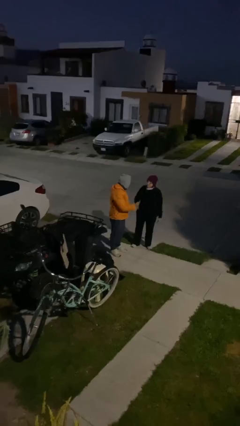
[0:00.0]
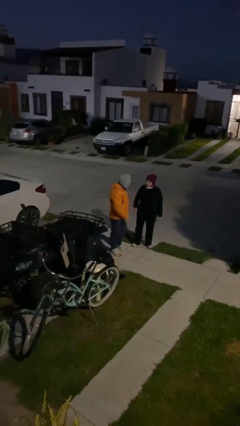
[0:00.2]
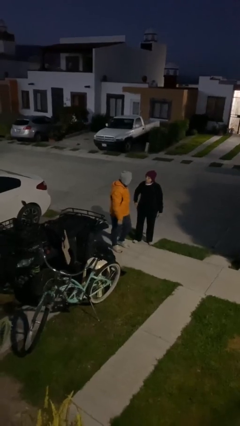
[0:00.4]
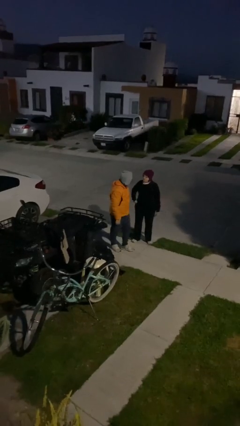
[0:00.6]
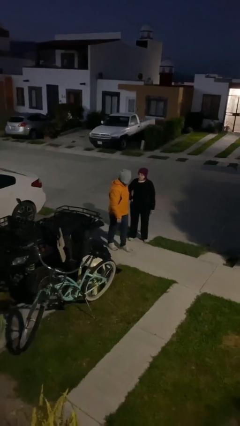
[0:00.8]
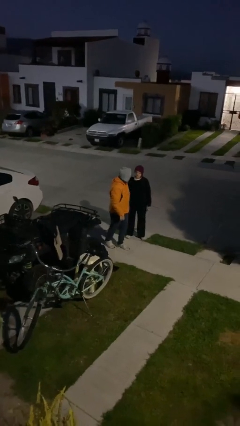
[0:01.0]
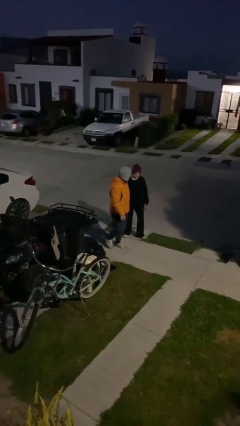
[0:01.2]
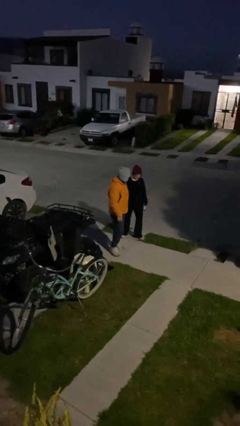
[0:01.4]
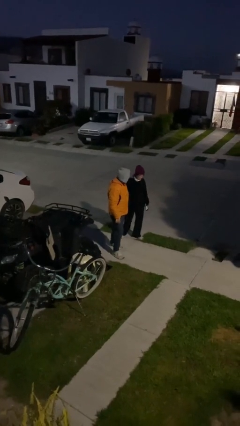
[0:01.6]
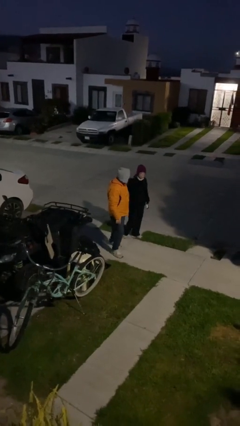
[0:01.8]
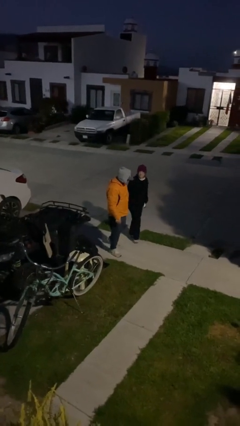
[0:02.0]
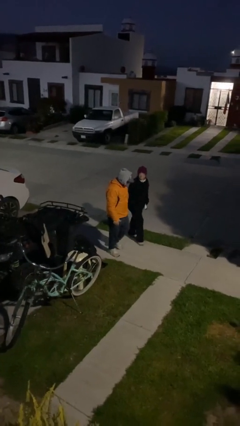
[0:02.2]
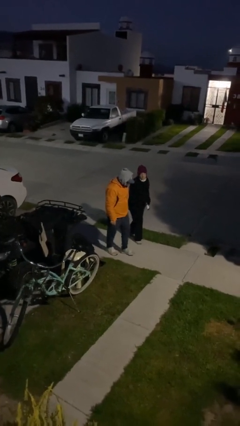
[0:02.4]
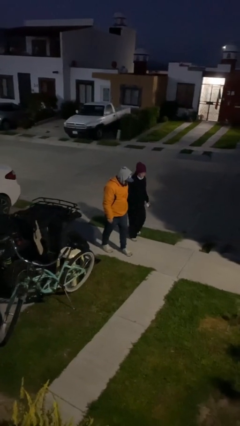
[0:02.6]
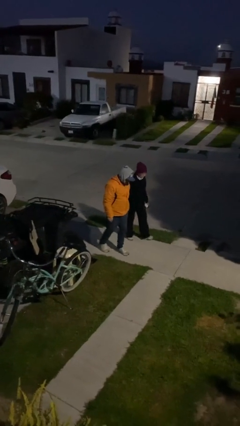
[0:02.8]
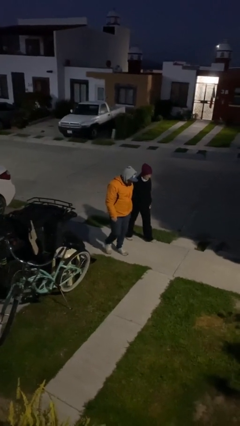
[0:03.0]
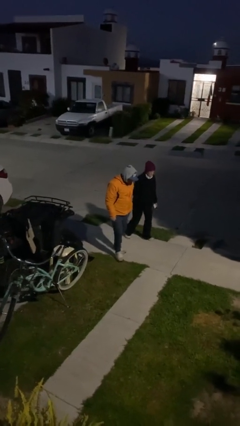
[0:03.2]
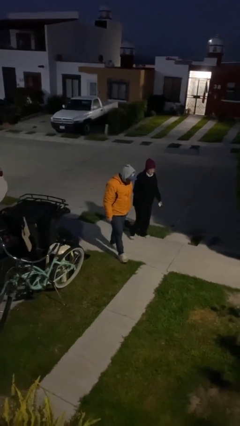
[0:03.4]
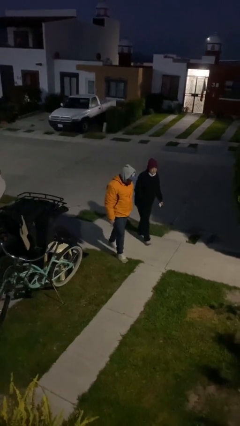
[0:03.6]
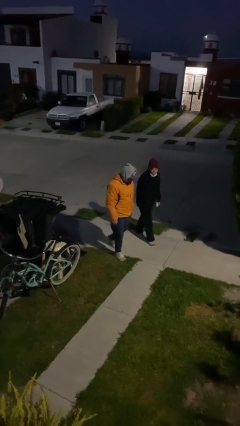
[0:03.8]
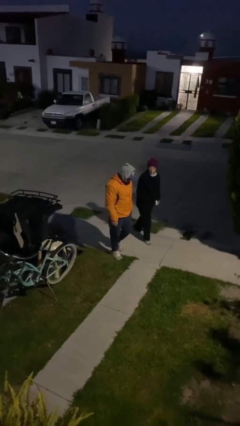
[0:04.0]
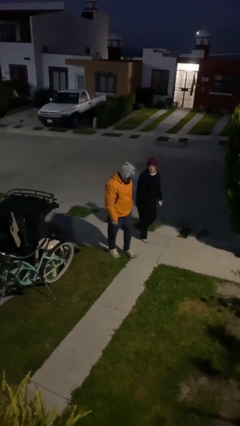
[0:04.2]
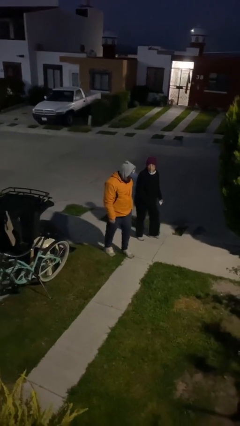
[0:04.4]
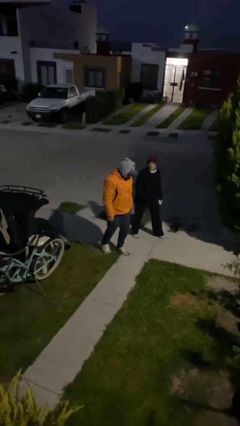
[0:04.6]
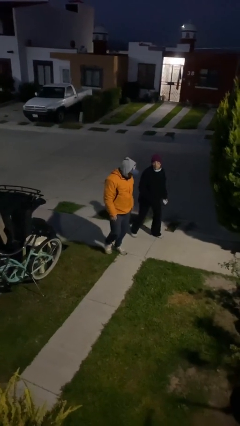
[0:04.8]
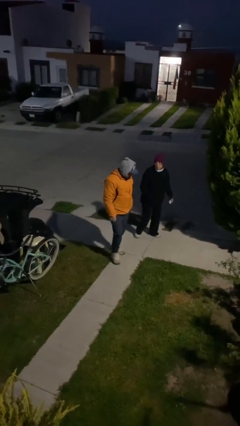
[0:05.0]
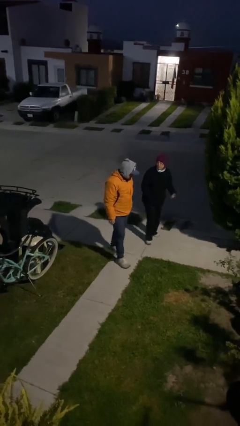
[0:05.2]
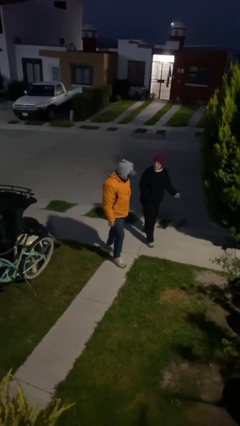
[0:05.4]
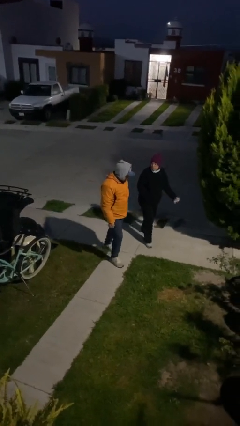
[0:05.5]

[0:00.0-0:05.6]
person talks to person

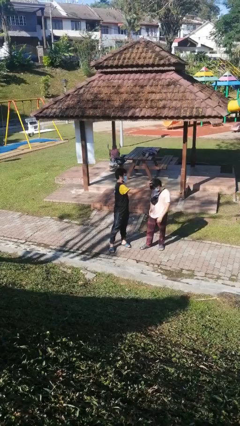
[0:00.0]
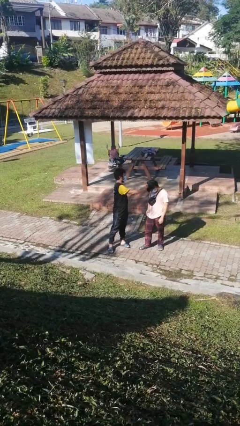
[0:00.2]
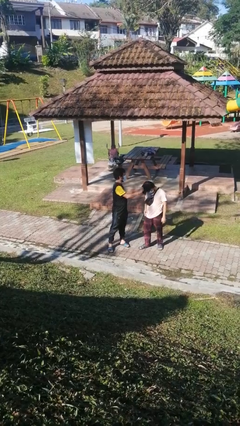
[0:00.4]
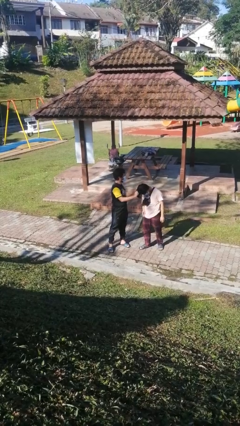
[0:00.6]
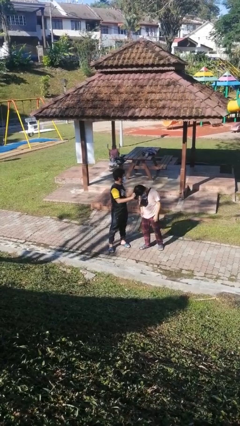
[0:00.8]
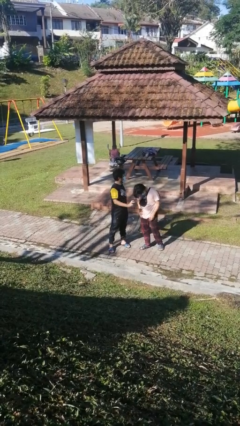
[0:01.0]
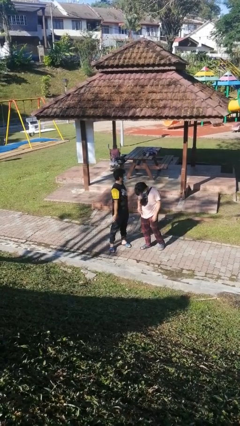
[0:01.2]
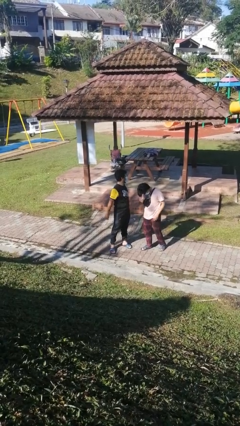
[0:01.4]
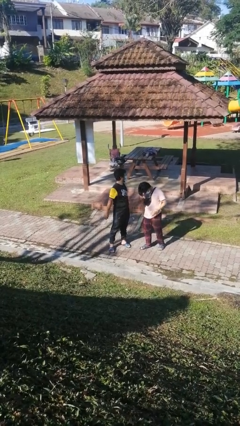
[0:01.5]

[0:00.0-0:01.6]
person grabs person by hair

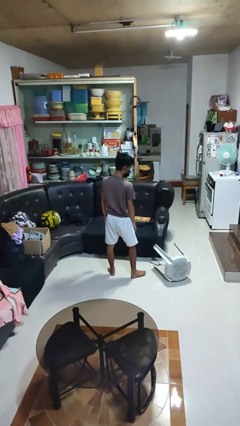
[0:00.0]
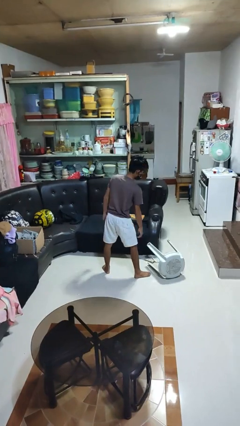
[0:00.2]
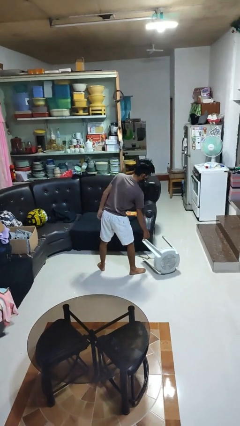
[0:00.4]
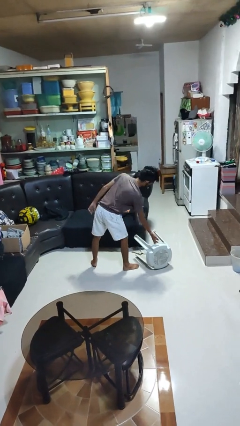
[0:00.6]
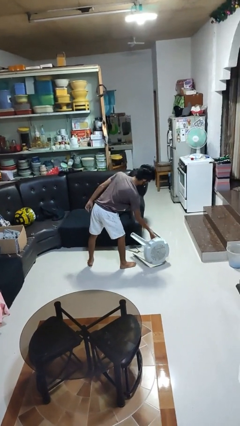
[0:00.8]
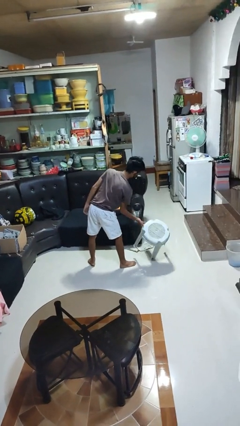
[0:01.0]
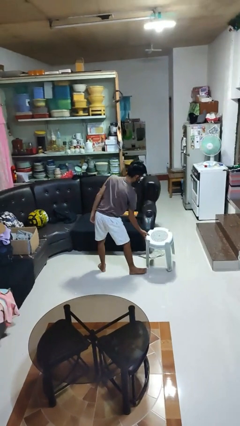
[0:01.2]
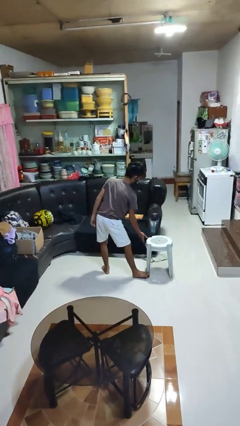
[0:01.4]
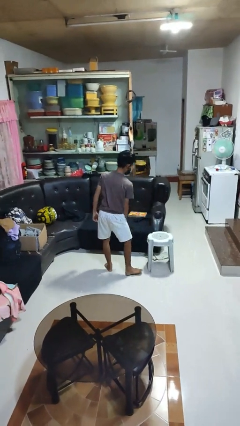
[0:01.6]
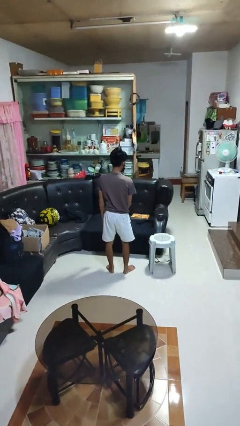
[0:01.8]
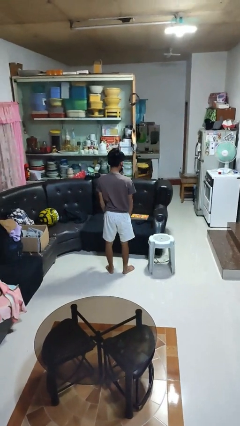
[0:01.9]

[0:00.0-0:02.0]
person sets upright furniture

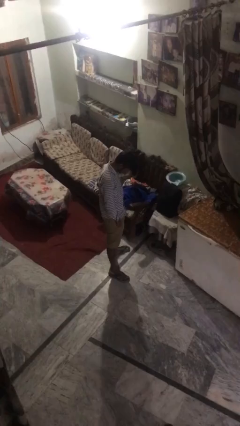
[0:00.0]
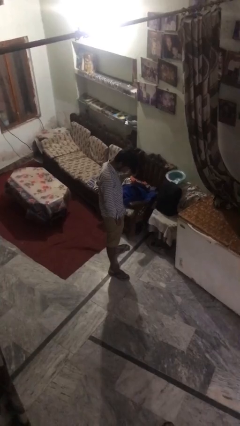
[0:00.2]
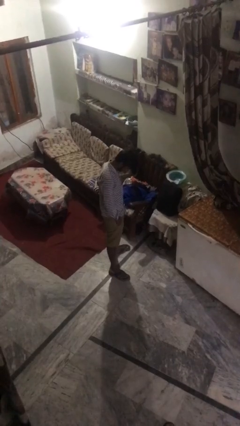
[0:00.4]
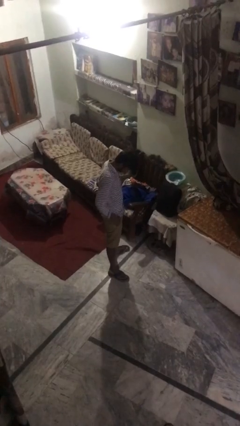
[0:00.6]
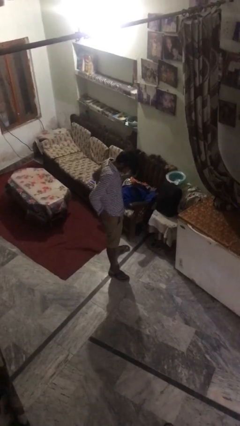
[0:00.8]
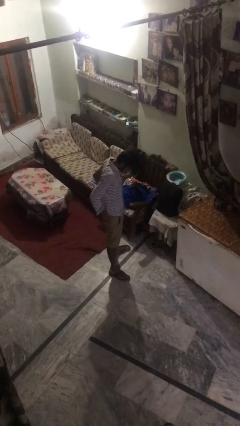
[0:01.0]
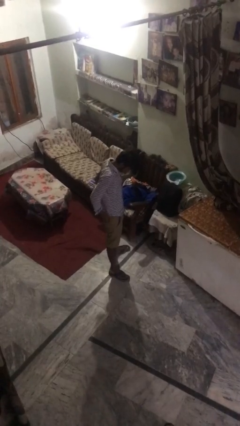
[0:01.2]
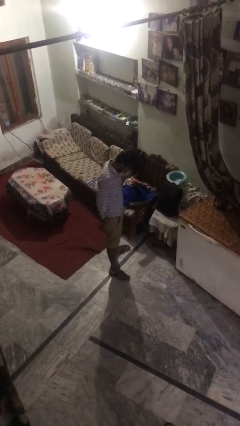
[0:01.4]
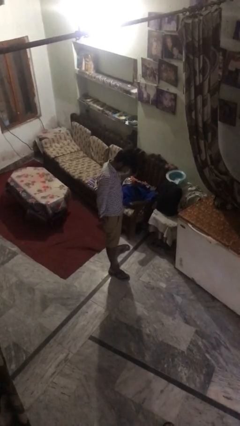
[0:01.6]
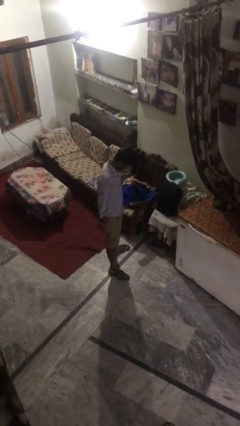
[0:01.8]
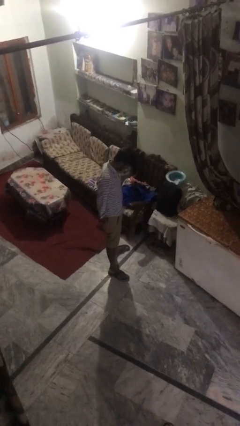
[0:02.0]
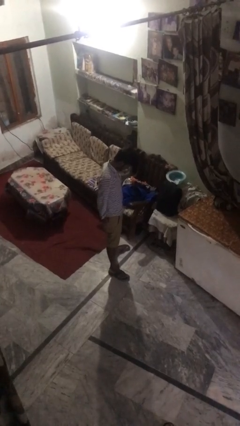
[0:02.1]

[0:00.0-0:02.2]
person puts hands in back pockets

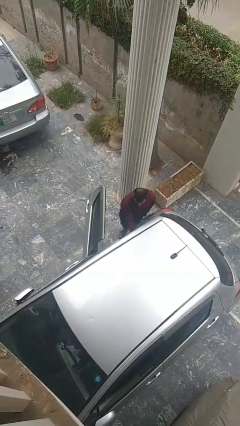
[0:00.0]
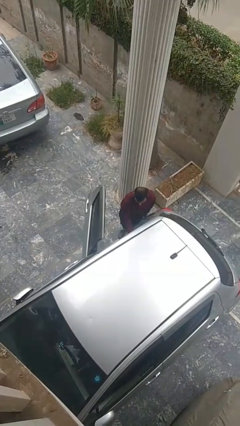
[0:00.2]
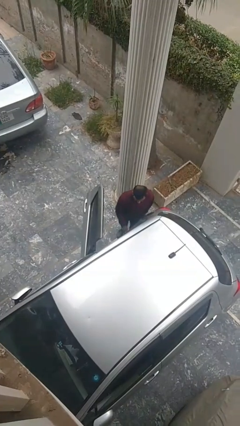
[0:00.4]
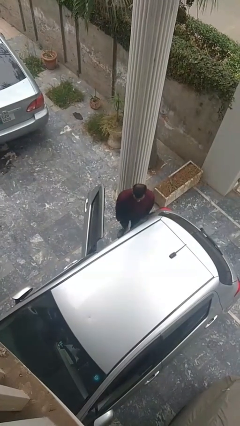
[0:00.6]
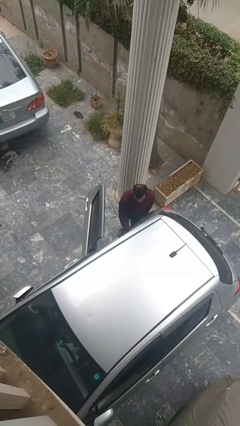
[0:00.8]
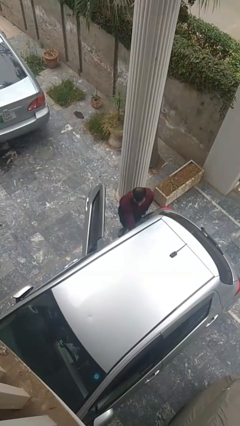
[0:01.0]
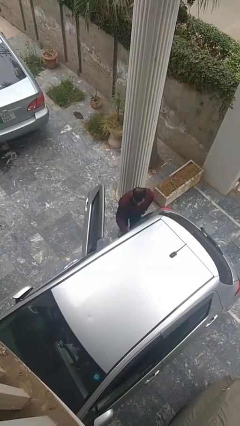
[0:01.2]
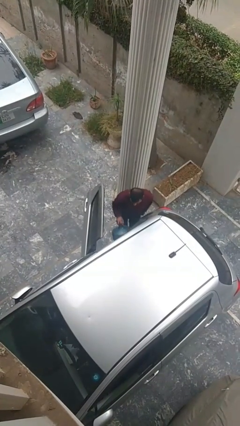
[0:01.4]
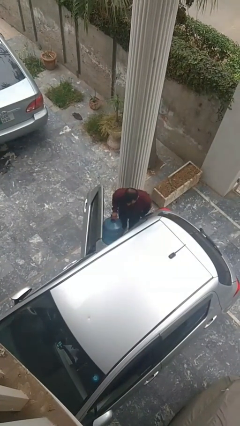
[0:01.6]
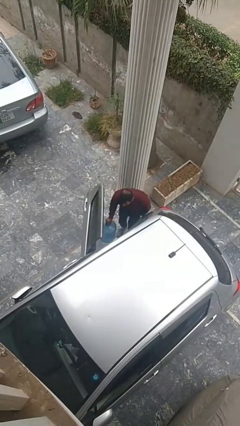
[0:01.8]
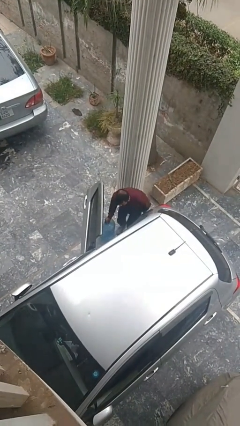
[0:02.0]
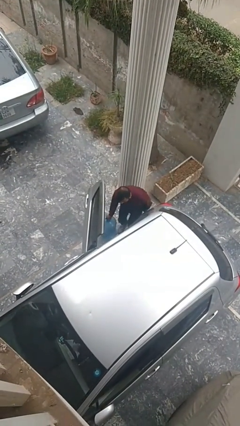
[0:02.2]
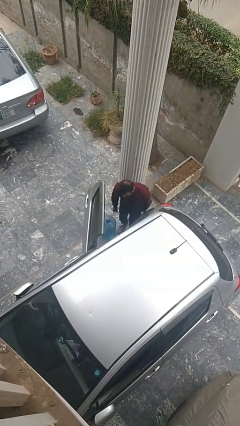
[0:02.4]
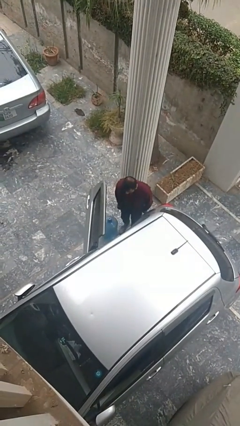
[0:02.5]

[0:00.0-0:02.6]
person unloads car

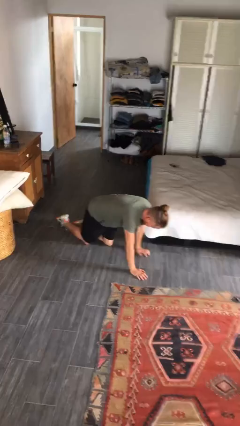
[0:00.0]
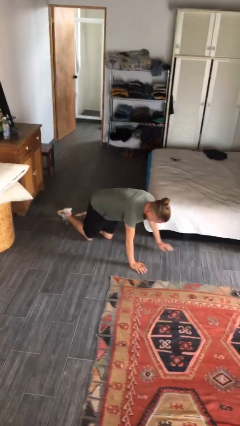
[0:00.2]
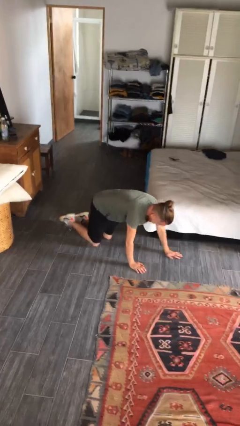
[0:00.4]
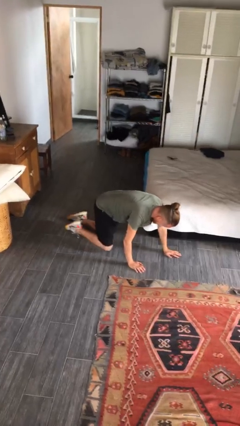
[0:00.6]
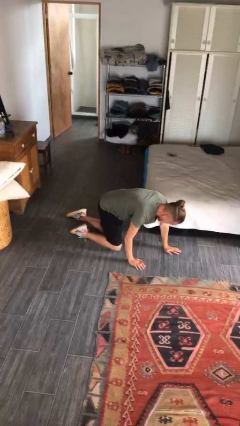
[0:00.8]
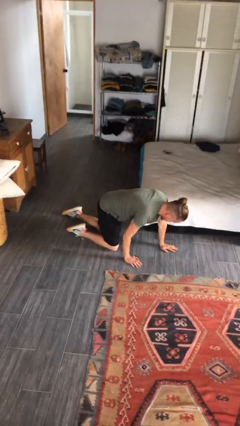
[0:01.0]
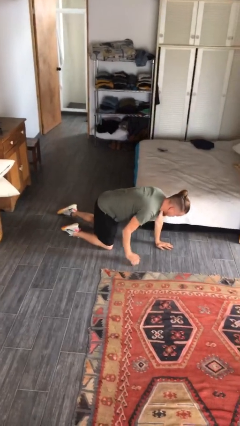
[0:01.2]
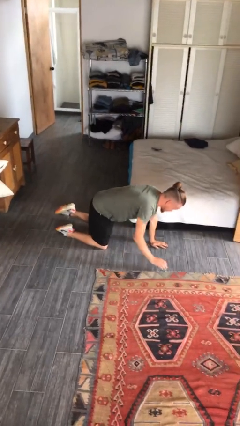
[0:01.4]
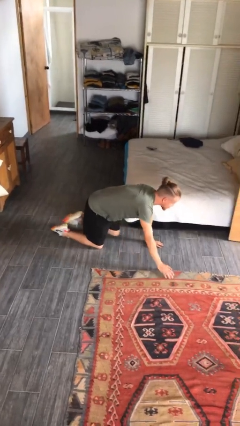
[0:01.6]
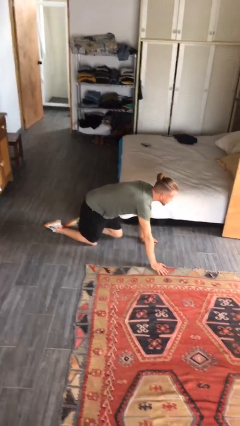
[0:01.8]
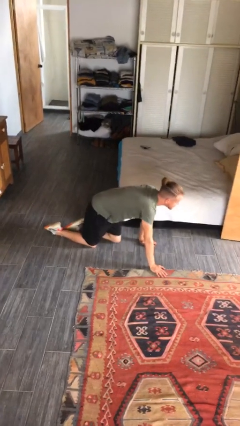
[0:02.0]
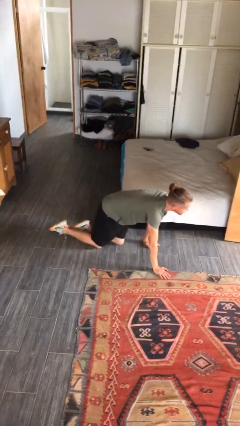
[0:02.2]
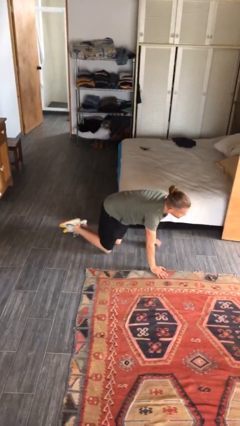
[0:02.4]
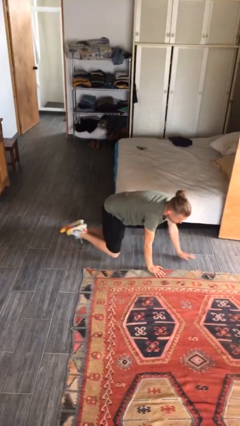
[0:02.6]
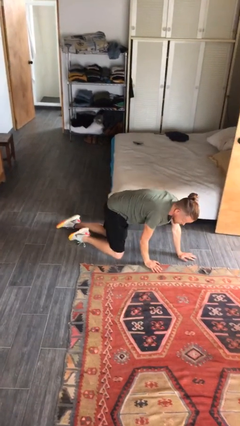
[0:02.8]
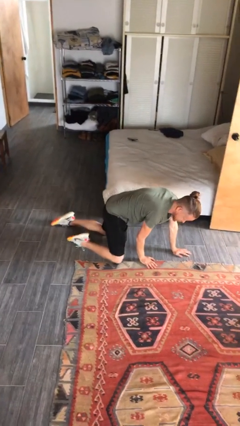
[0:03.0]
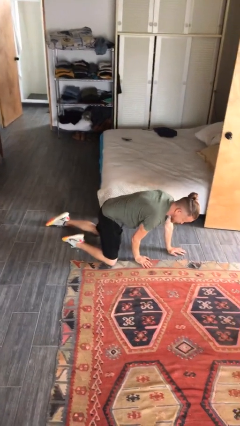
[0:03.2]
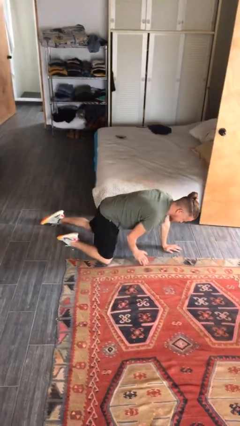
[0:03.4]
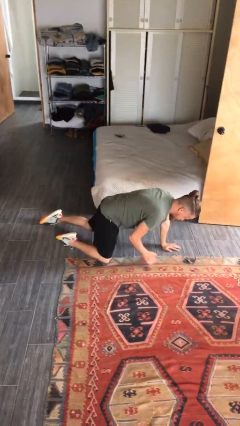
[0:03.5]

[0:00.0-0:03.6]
person crawls
